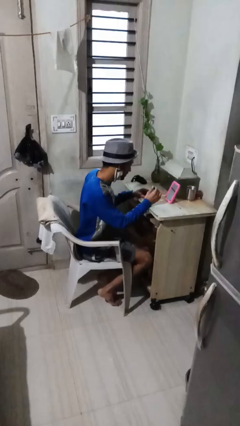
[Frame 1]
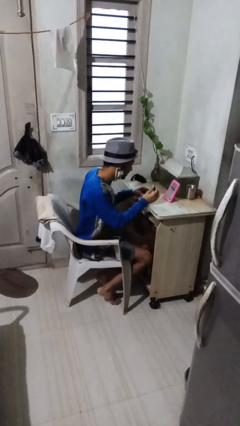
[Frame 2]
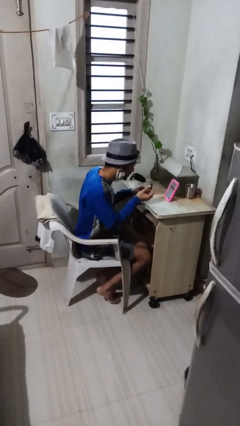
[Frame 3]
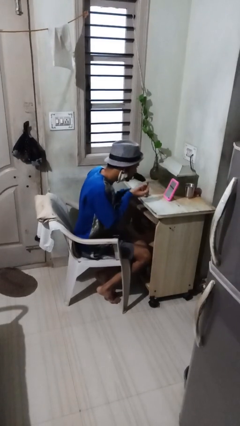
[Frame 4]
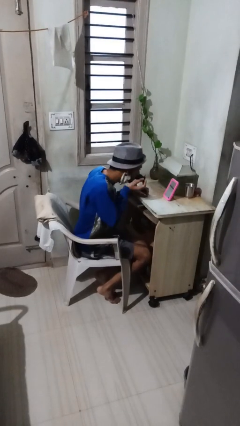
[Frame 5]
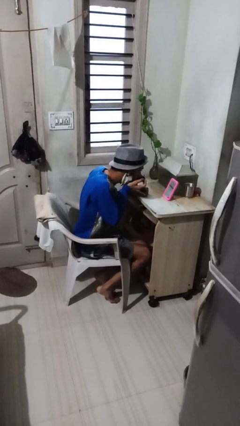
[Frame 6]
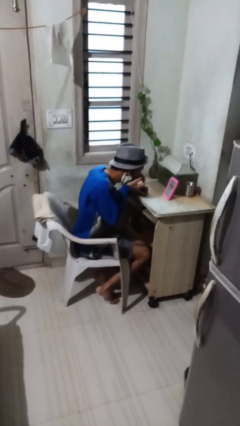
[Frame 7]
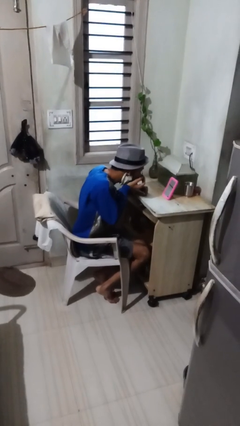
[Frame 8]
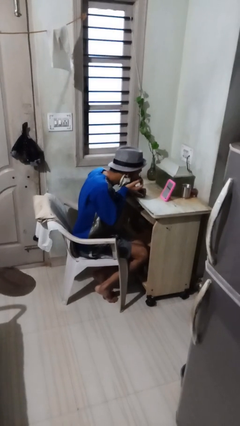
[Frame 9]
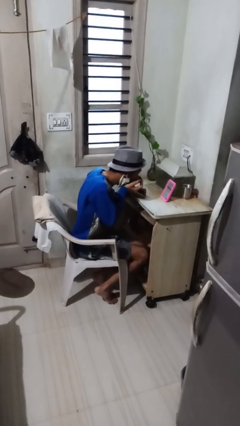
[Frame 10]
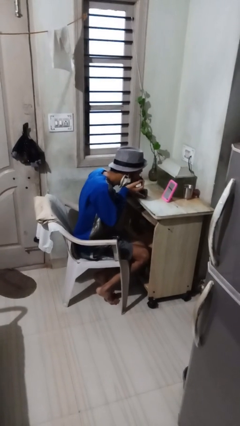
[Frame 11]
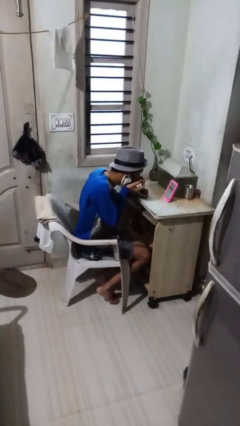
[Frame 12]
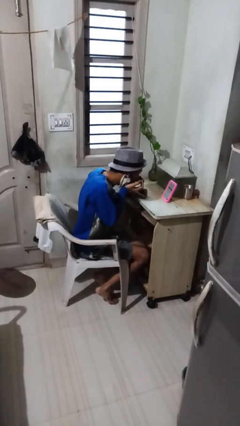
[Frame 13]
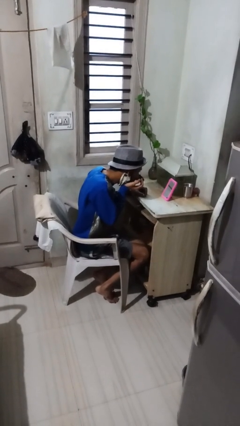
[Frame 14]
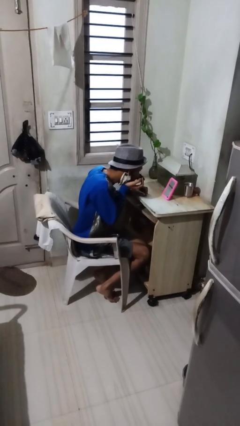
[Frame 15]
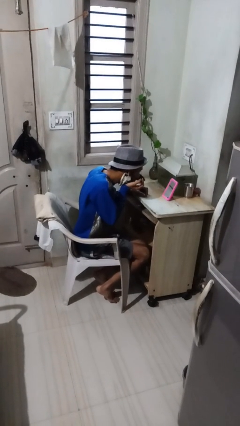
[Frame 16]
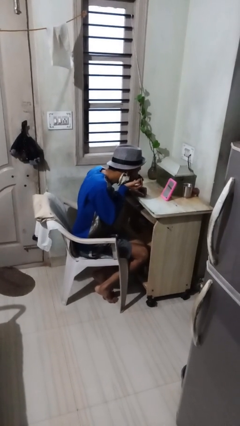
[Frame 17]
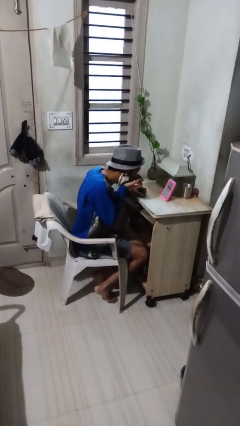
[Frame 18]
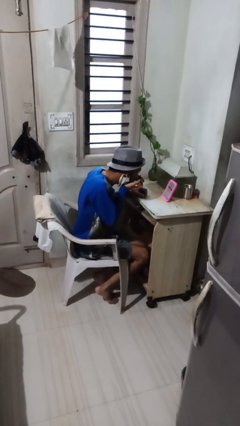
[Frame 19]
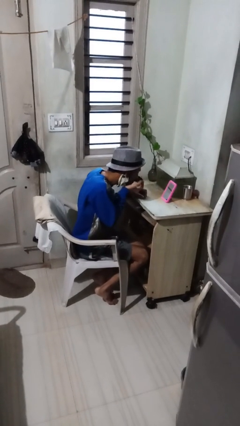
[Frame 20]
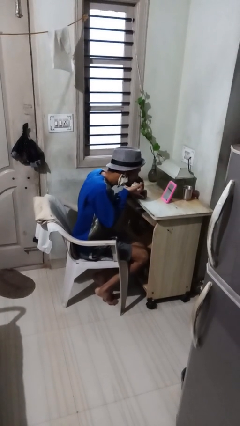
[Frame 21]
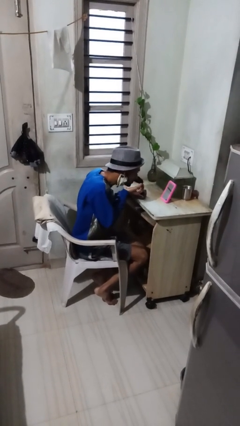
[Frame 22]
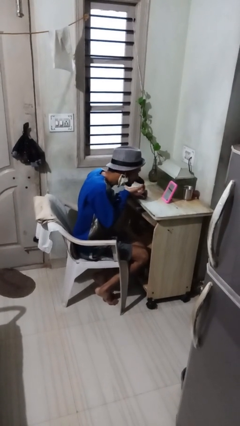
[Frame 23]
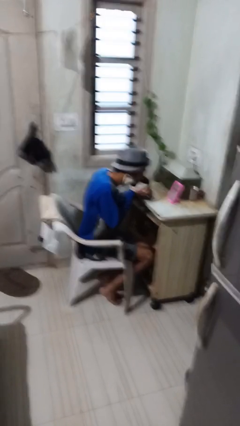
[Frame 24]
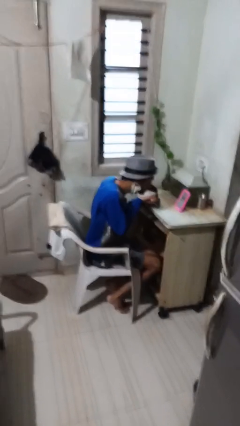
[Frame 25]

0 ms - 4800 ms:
person applies eye makeup

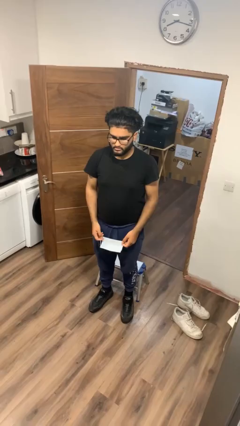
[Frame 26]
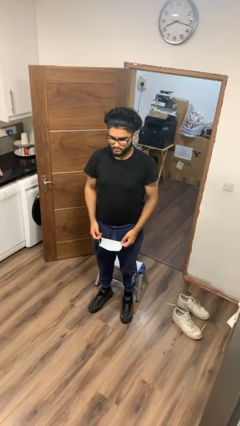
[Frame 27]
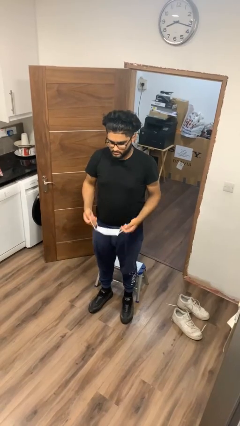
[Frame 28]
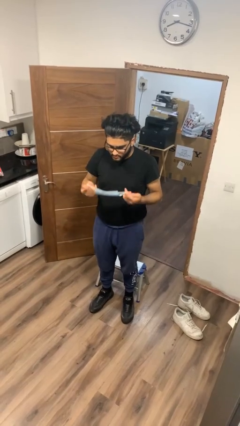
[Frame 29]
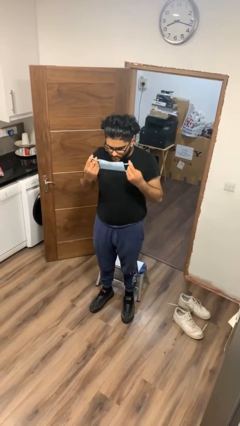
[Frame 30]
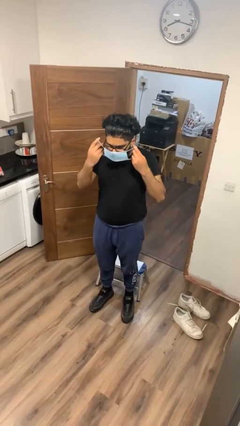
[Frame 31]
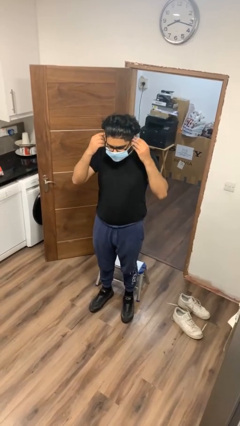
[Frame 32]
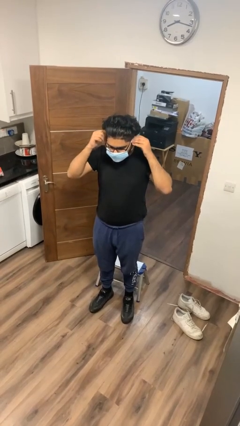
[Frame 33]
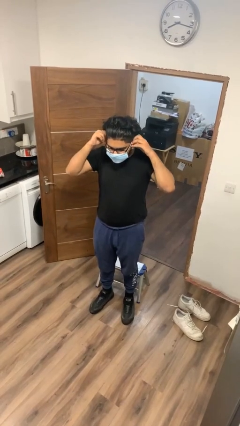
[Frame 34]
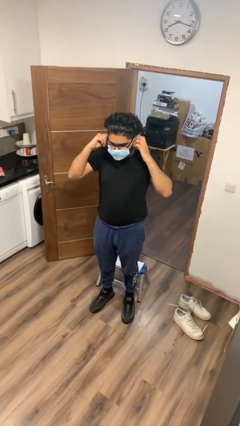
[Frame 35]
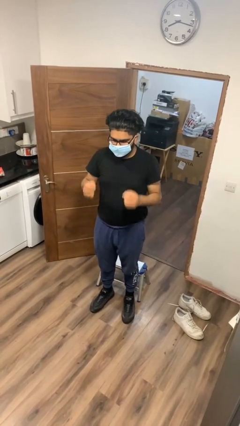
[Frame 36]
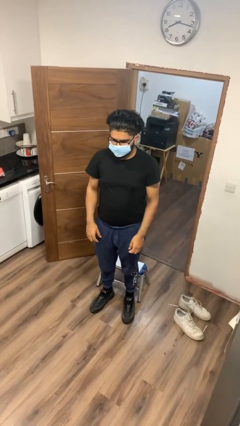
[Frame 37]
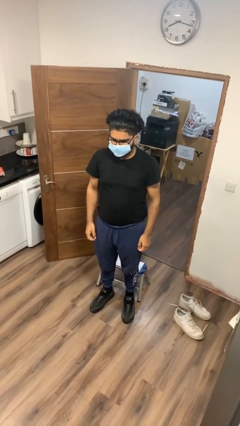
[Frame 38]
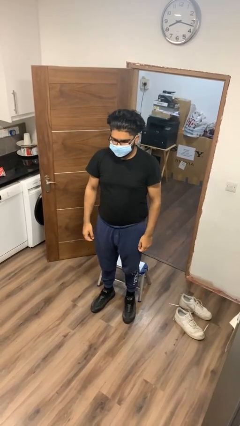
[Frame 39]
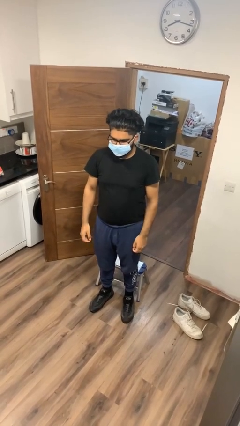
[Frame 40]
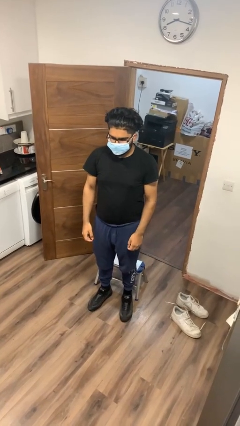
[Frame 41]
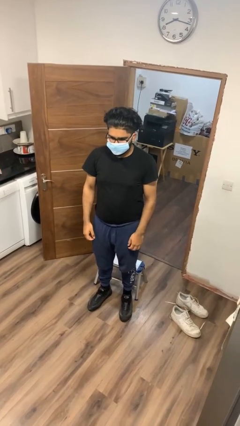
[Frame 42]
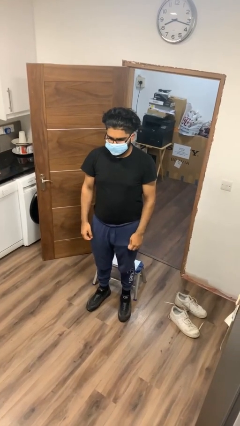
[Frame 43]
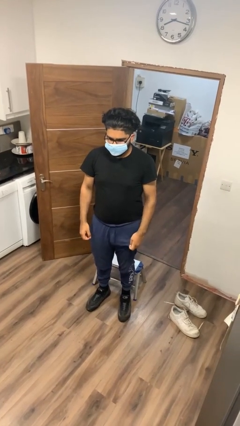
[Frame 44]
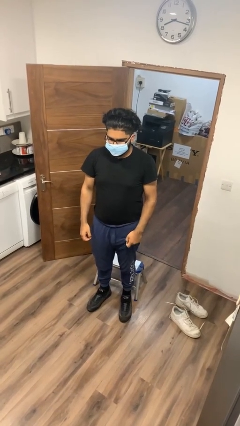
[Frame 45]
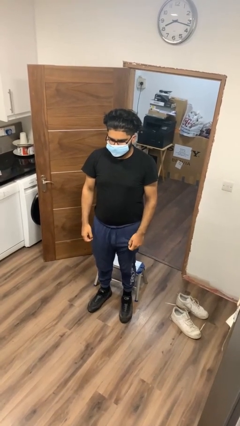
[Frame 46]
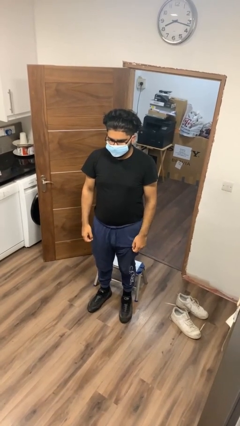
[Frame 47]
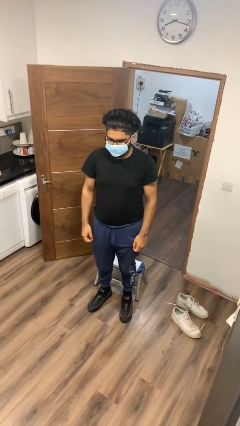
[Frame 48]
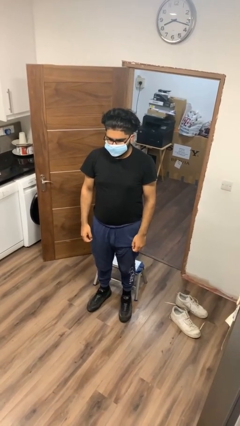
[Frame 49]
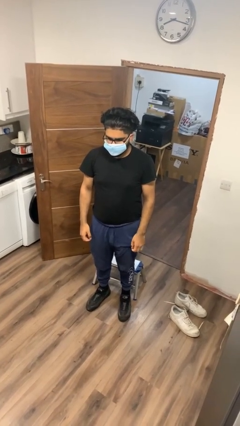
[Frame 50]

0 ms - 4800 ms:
person puts on facemask

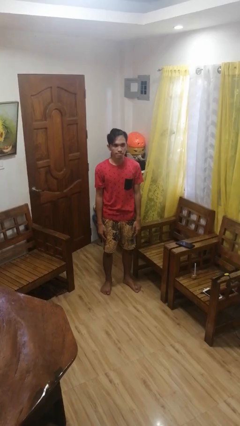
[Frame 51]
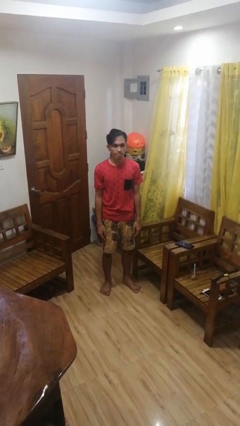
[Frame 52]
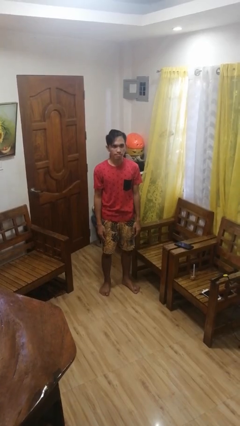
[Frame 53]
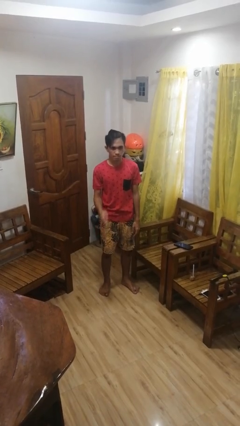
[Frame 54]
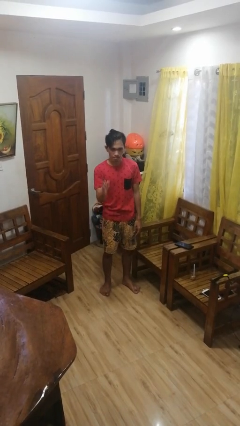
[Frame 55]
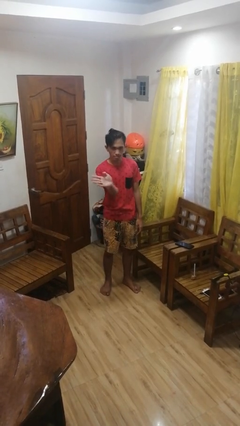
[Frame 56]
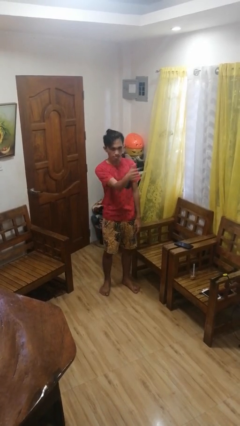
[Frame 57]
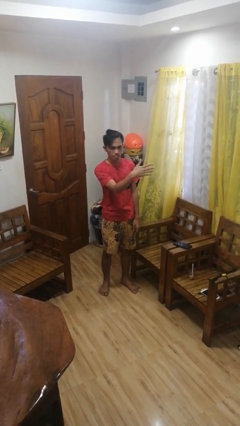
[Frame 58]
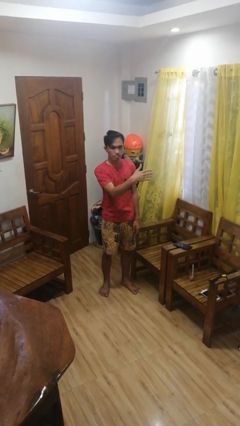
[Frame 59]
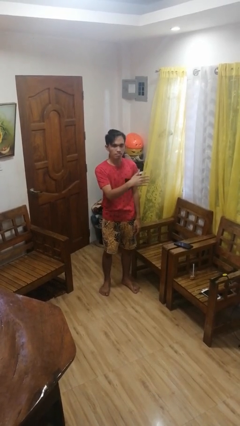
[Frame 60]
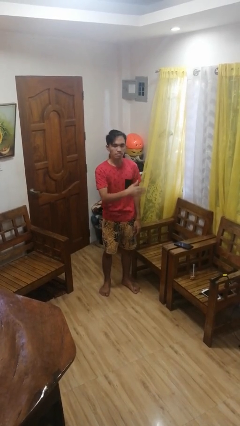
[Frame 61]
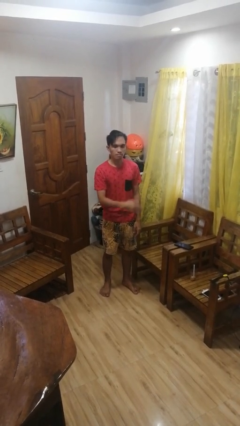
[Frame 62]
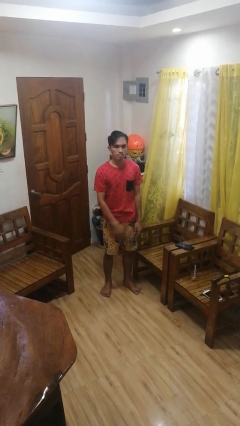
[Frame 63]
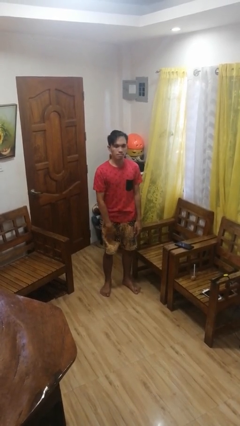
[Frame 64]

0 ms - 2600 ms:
person gestures swipe left

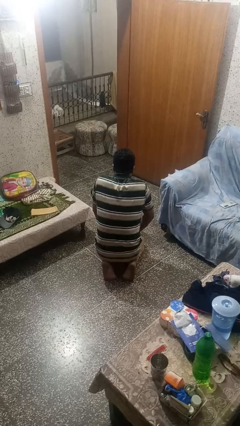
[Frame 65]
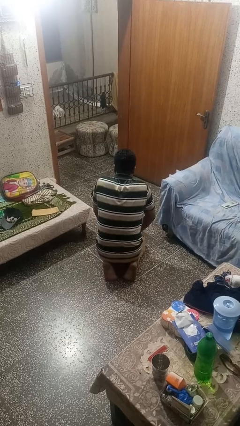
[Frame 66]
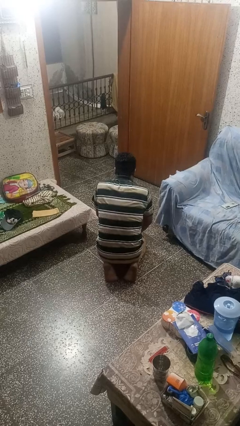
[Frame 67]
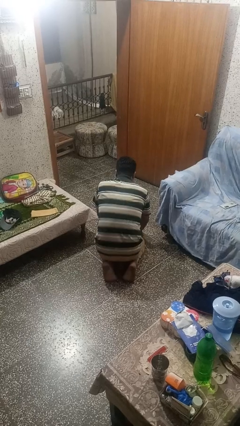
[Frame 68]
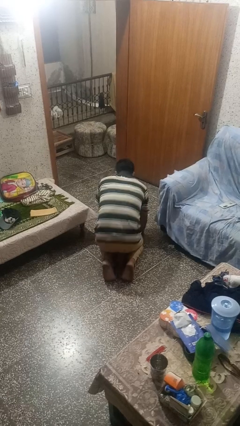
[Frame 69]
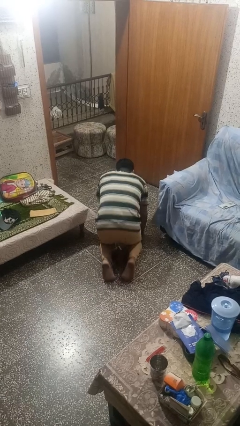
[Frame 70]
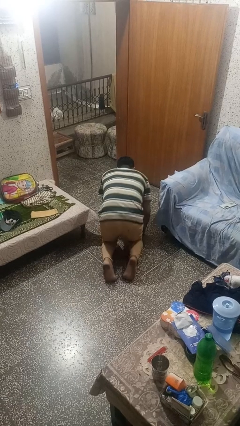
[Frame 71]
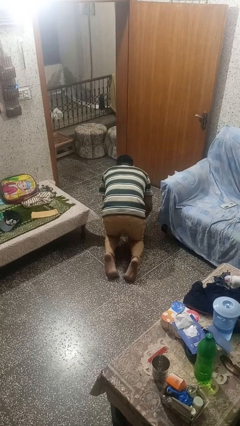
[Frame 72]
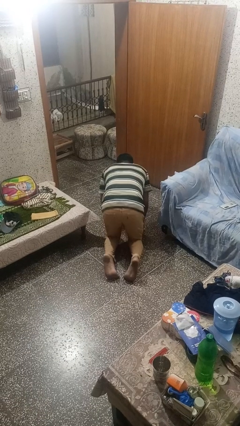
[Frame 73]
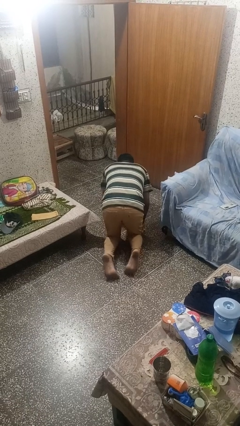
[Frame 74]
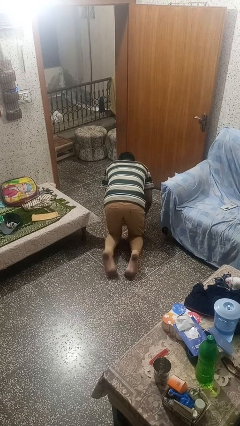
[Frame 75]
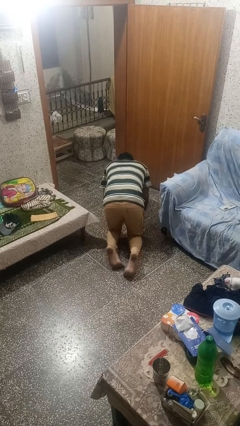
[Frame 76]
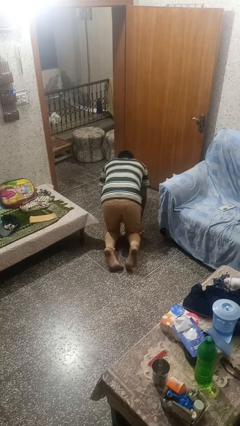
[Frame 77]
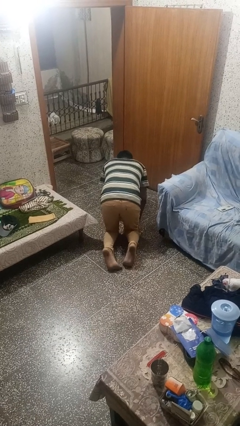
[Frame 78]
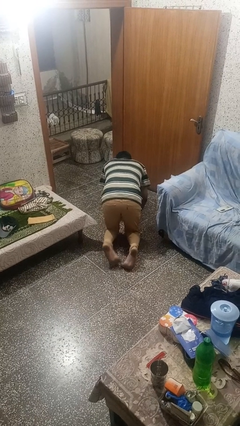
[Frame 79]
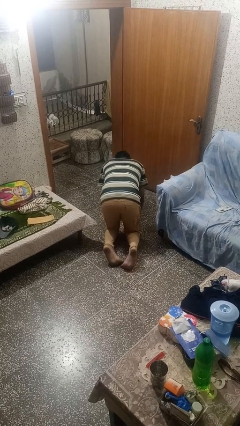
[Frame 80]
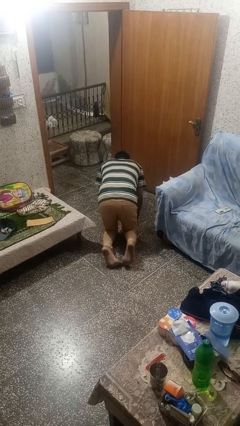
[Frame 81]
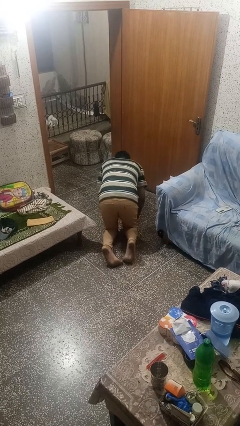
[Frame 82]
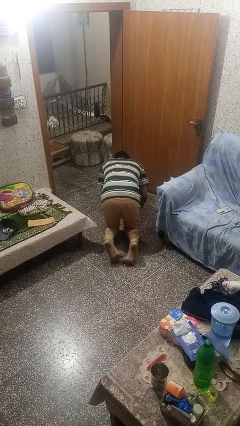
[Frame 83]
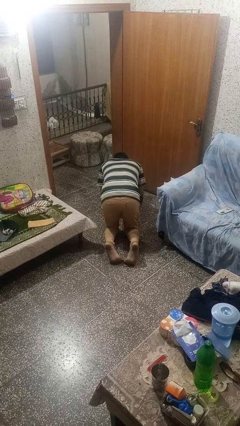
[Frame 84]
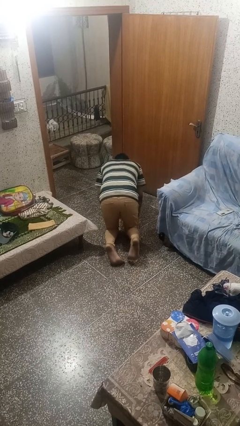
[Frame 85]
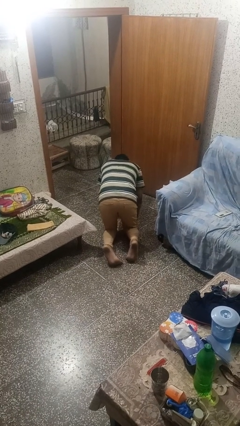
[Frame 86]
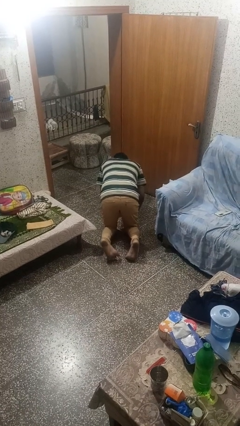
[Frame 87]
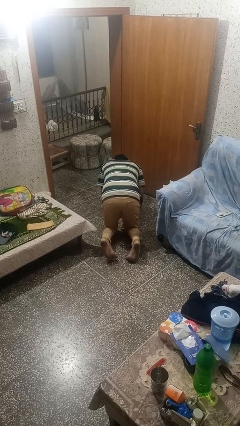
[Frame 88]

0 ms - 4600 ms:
person crawls

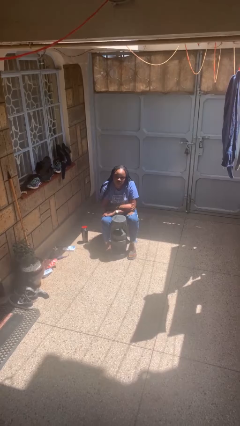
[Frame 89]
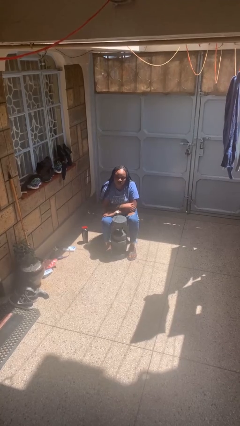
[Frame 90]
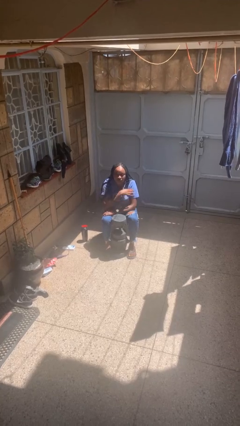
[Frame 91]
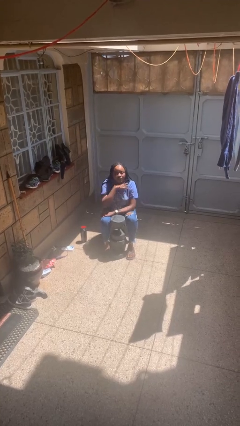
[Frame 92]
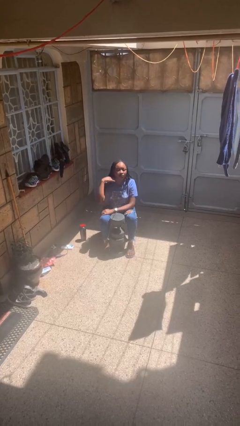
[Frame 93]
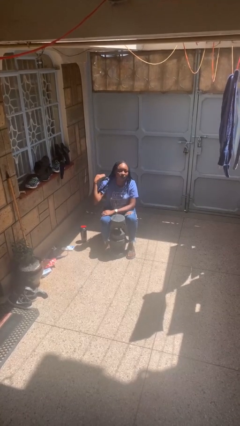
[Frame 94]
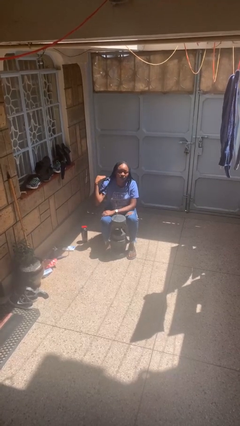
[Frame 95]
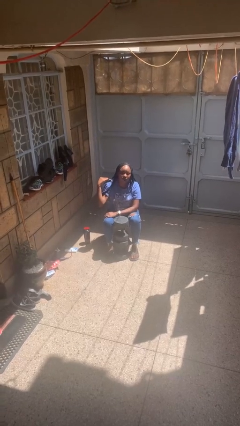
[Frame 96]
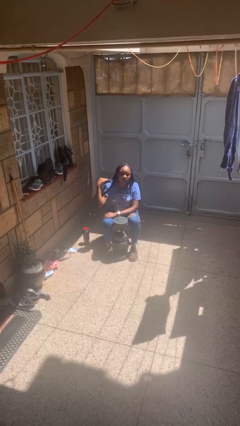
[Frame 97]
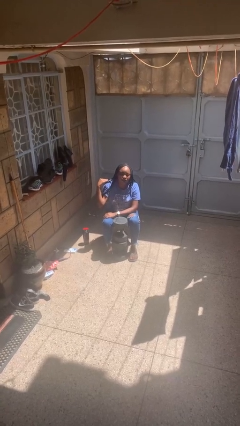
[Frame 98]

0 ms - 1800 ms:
person gestures cut
